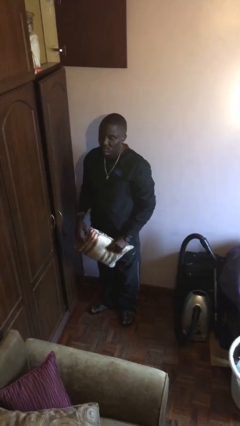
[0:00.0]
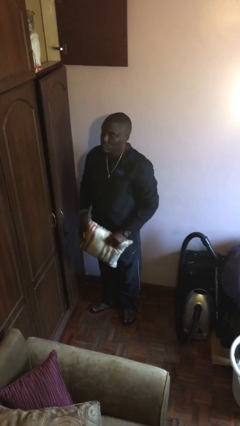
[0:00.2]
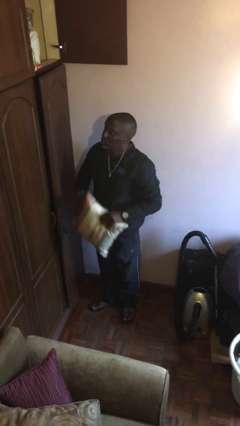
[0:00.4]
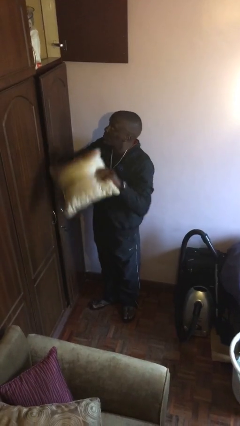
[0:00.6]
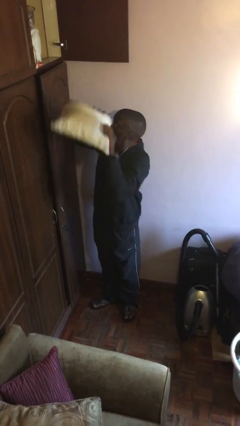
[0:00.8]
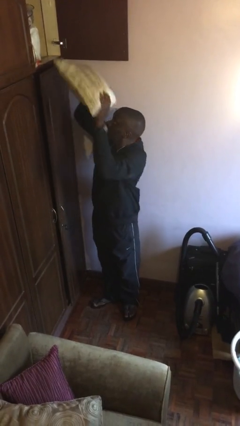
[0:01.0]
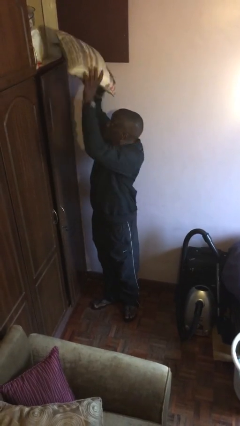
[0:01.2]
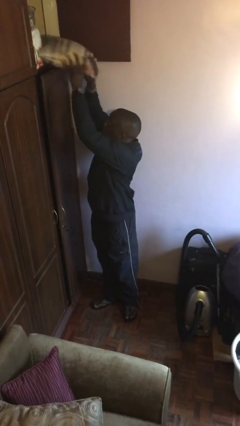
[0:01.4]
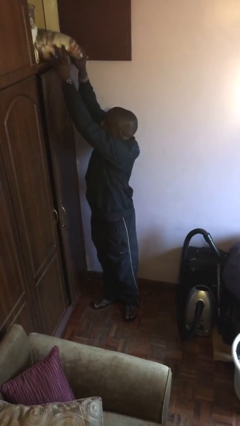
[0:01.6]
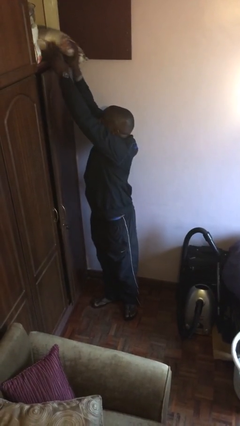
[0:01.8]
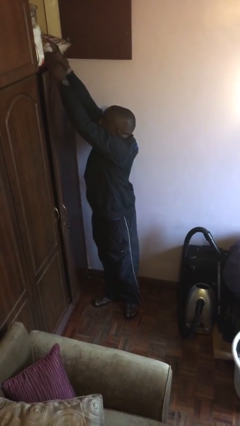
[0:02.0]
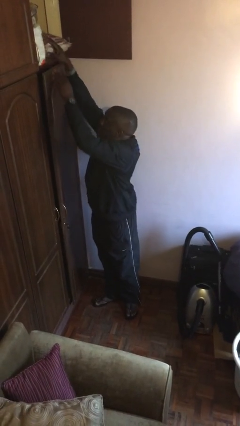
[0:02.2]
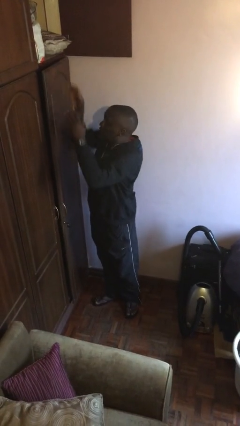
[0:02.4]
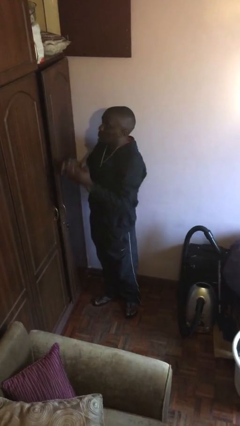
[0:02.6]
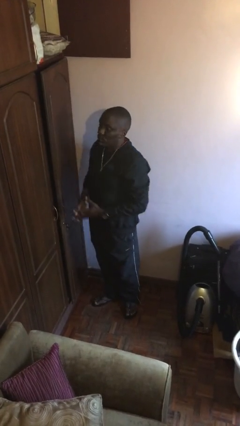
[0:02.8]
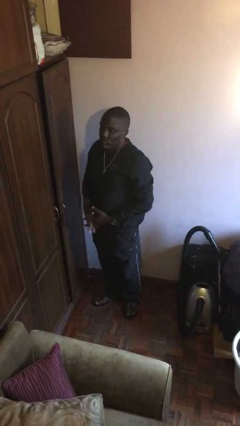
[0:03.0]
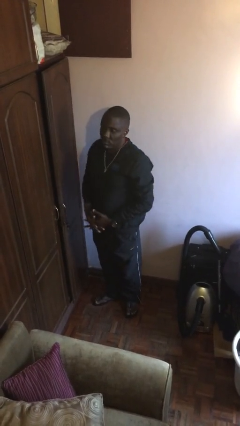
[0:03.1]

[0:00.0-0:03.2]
person puts down object on shelf

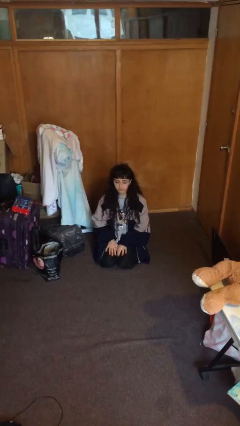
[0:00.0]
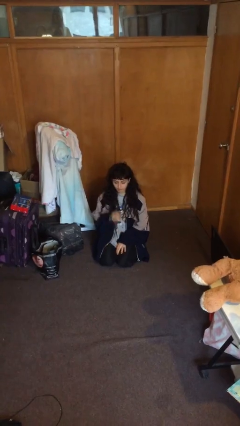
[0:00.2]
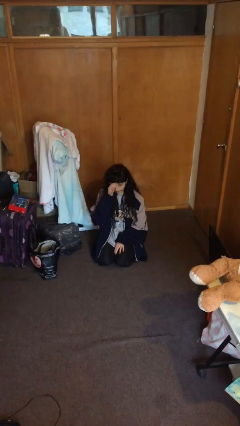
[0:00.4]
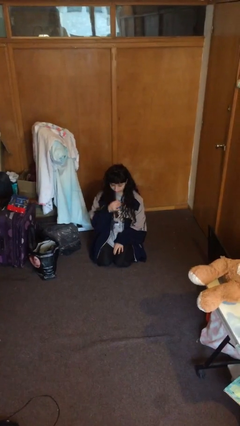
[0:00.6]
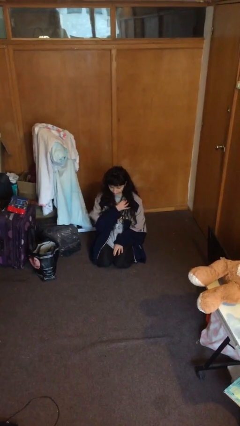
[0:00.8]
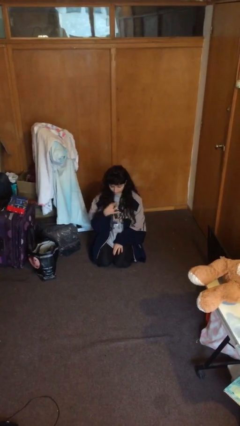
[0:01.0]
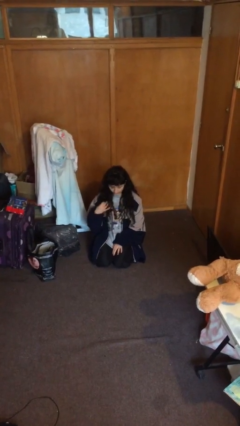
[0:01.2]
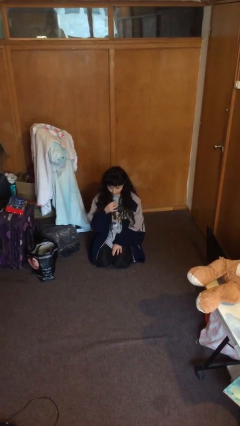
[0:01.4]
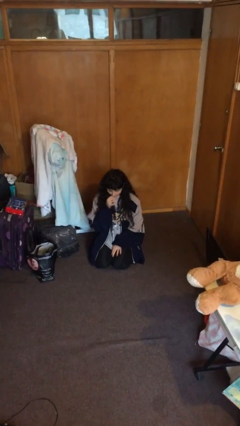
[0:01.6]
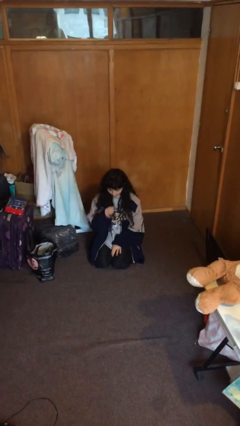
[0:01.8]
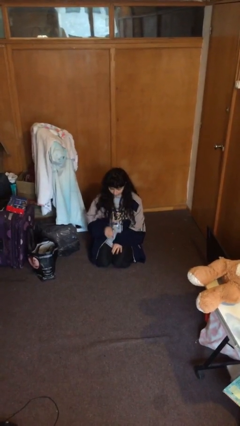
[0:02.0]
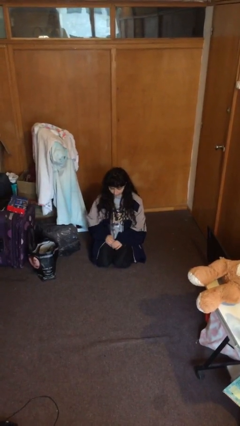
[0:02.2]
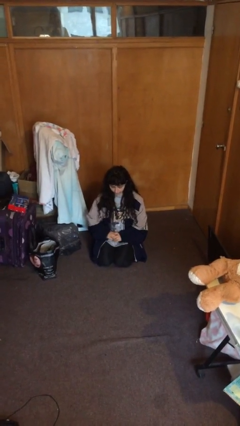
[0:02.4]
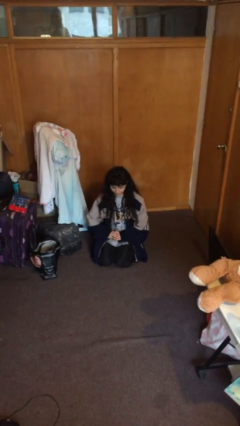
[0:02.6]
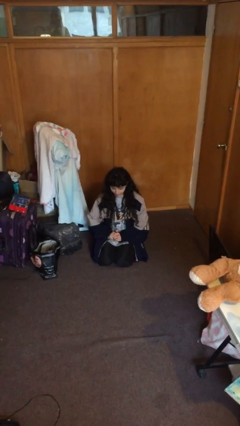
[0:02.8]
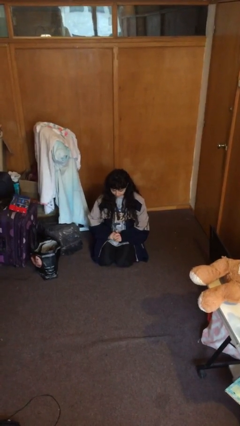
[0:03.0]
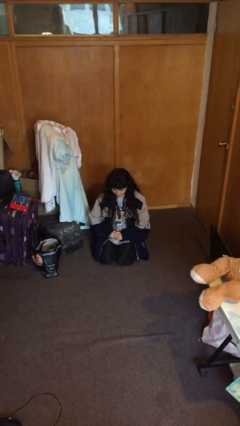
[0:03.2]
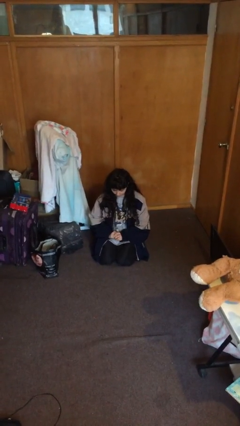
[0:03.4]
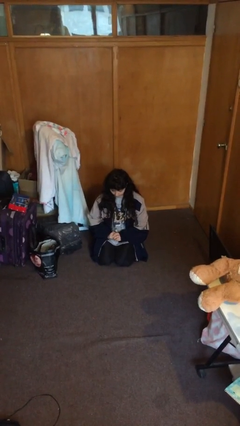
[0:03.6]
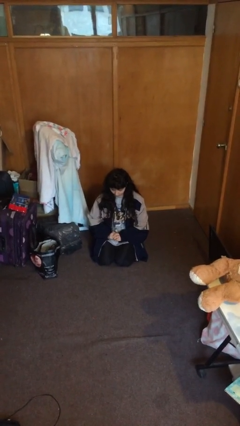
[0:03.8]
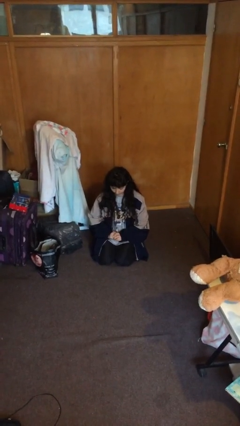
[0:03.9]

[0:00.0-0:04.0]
person prays

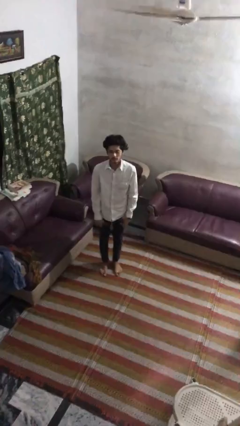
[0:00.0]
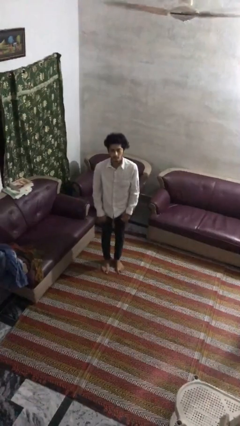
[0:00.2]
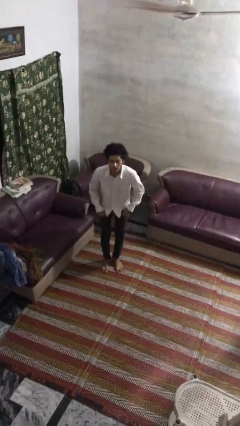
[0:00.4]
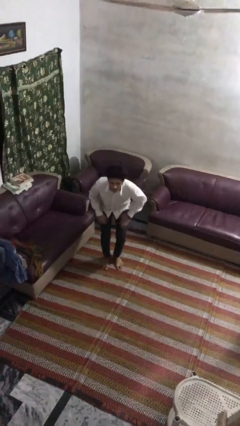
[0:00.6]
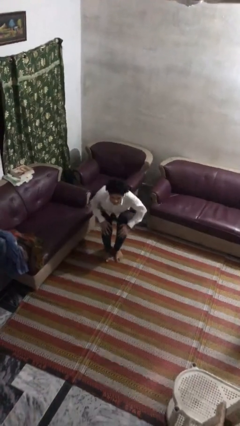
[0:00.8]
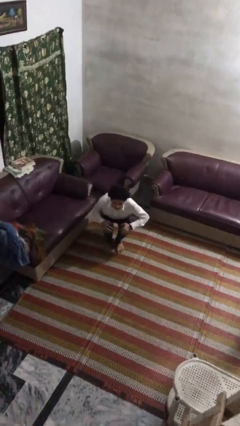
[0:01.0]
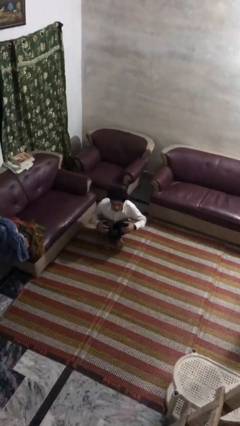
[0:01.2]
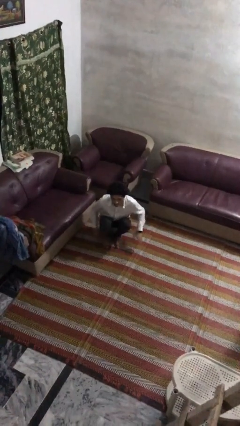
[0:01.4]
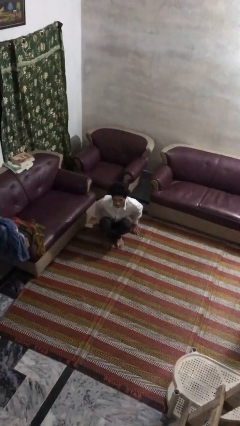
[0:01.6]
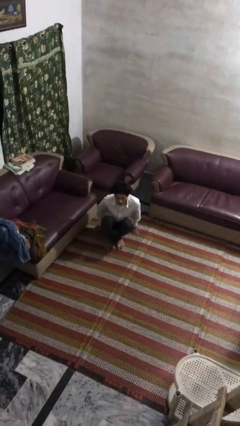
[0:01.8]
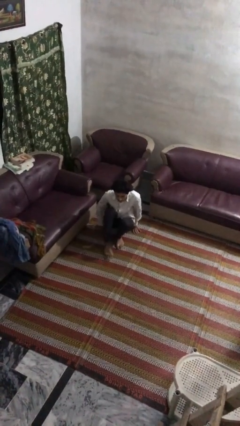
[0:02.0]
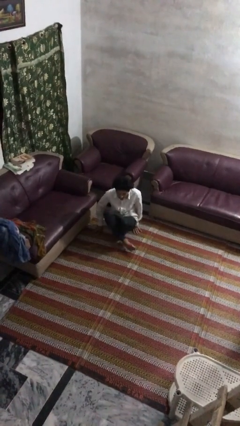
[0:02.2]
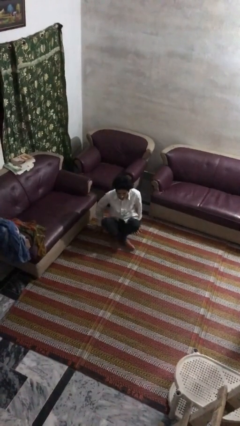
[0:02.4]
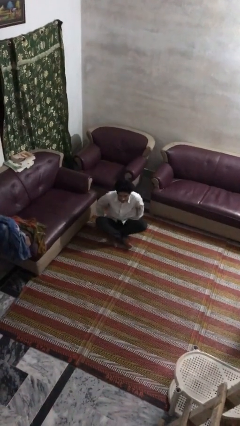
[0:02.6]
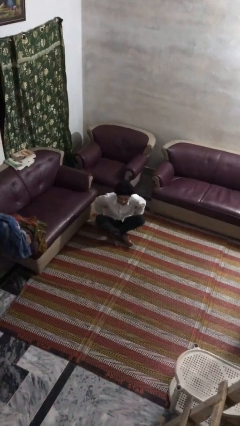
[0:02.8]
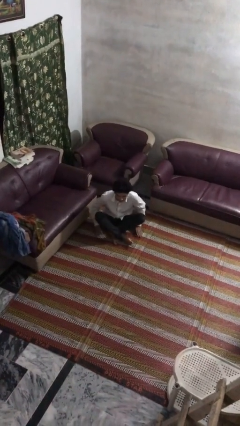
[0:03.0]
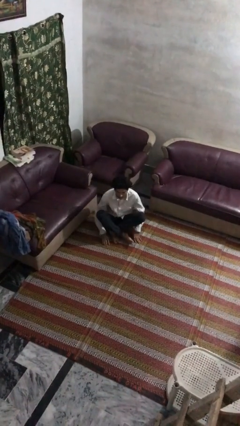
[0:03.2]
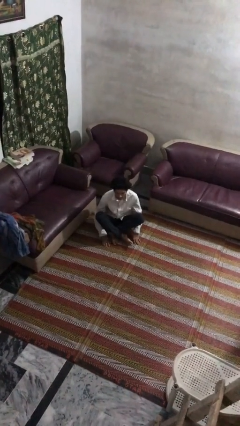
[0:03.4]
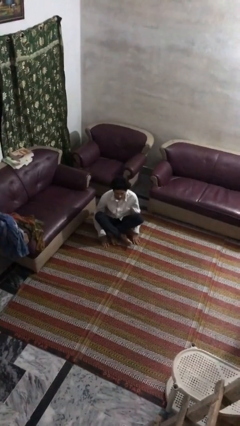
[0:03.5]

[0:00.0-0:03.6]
person sits crisscross

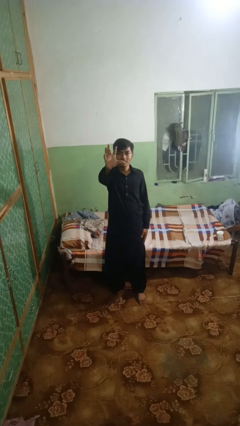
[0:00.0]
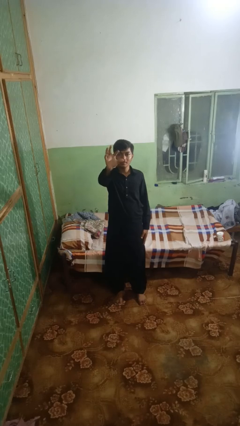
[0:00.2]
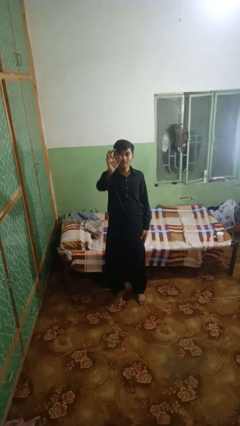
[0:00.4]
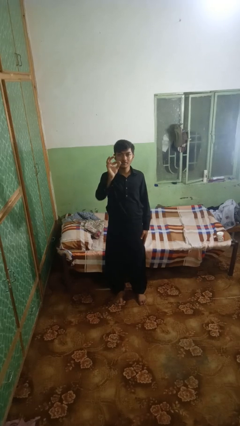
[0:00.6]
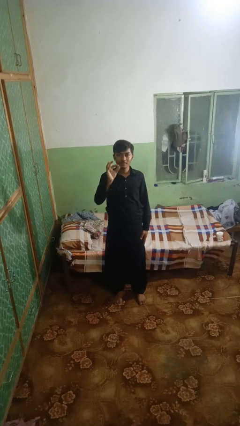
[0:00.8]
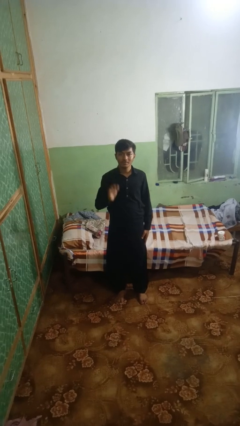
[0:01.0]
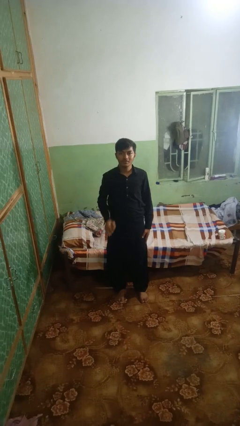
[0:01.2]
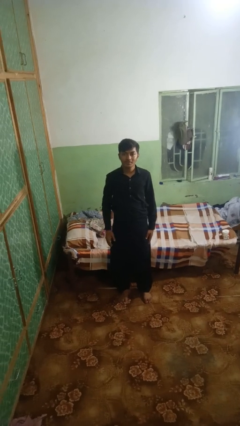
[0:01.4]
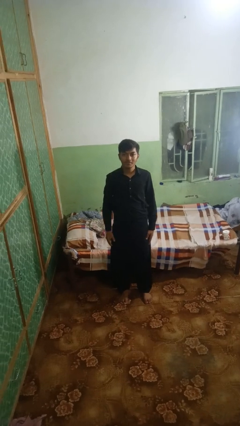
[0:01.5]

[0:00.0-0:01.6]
person gestures zoom out

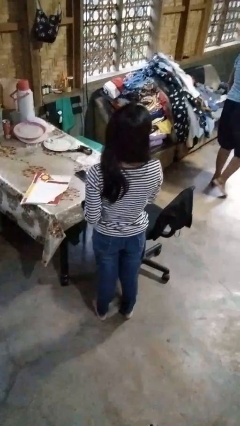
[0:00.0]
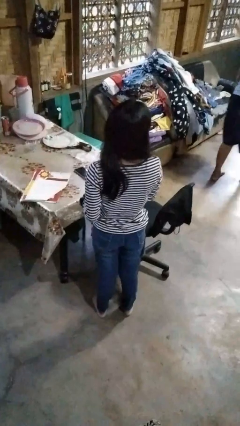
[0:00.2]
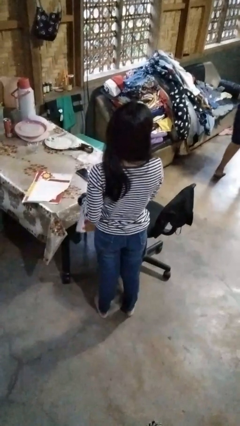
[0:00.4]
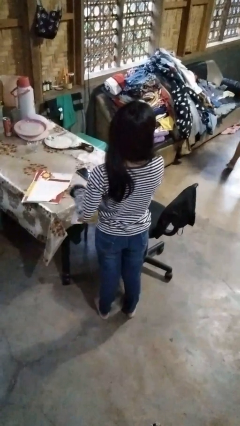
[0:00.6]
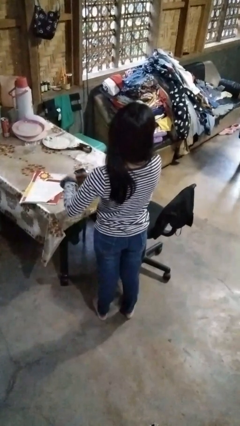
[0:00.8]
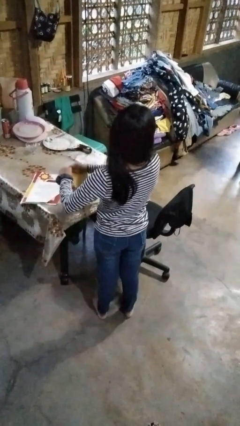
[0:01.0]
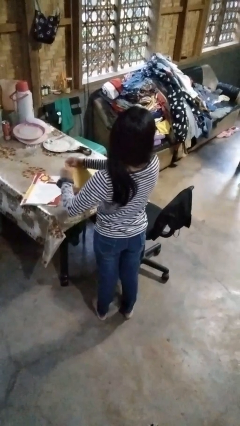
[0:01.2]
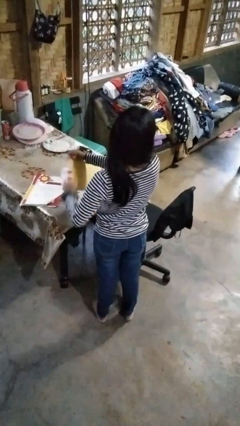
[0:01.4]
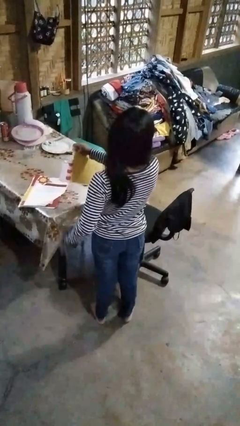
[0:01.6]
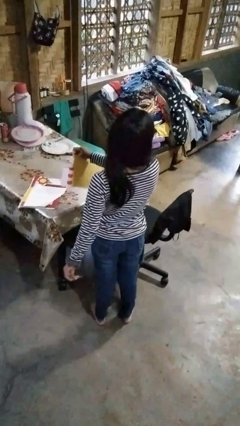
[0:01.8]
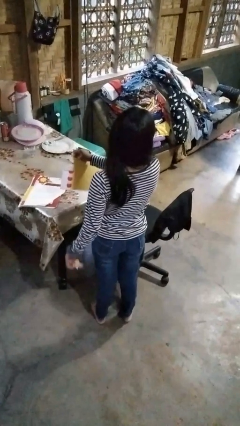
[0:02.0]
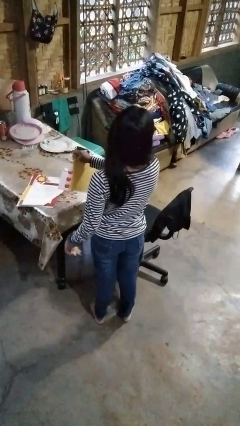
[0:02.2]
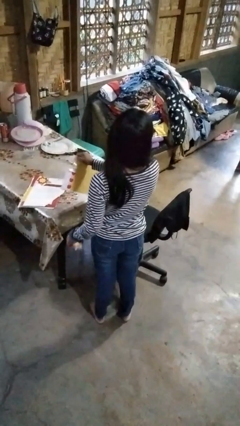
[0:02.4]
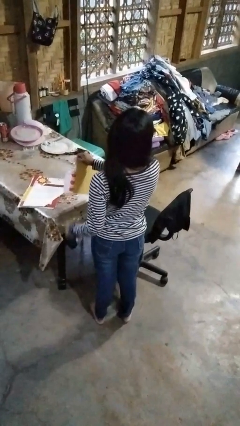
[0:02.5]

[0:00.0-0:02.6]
person tears paper

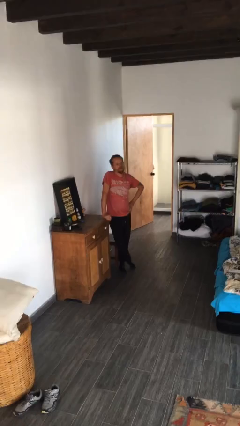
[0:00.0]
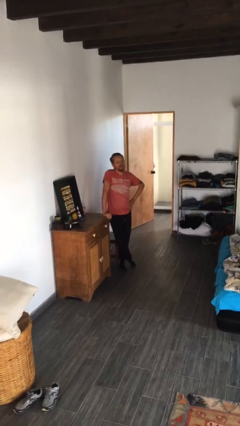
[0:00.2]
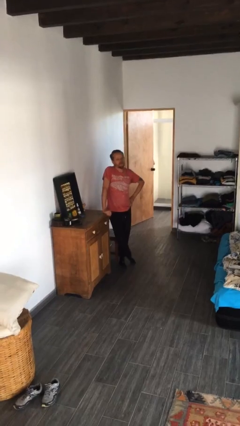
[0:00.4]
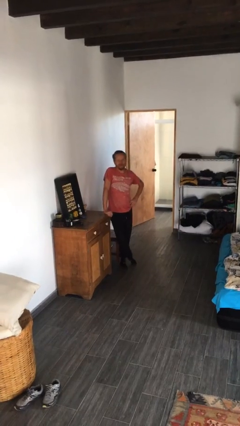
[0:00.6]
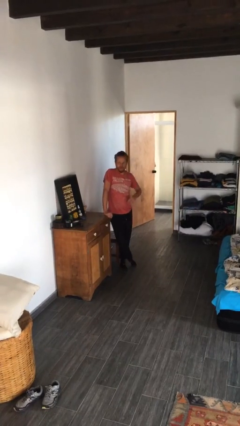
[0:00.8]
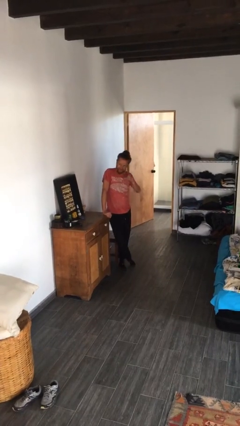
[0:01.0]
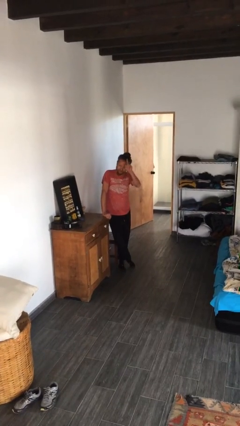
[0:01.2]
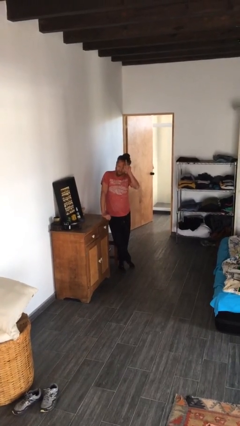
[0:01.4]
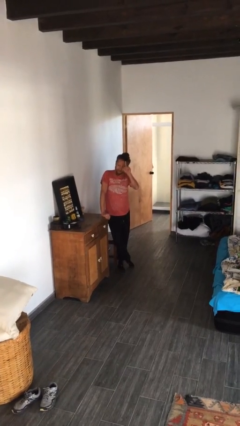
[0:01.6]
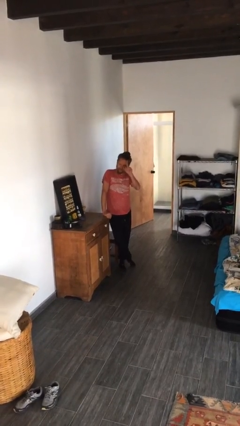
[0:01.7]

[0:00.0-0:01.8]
person gestures raise hand

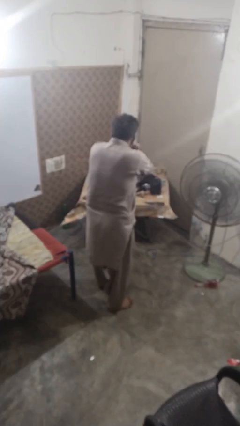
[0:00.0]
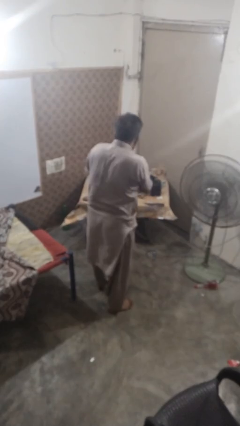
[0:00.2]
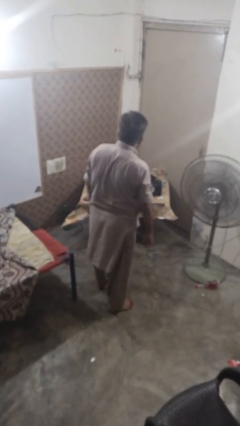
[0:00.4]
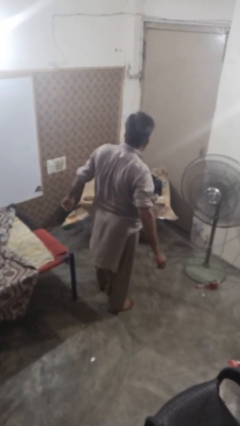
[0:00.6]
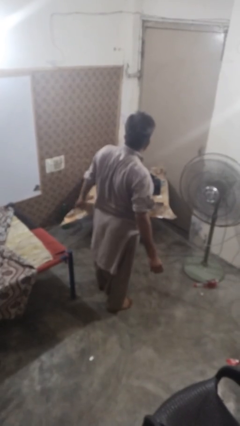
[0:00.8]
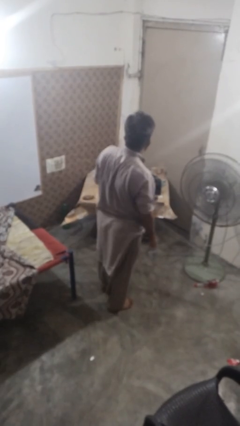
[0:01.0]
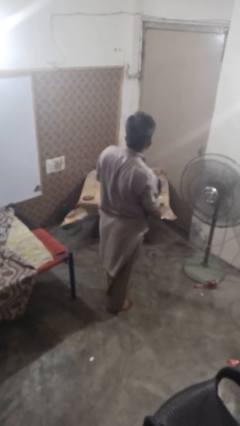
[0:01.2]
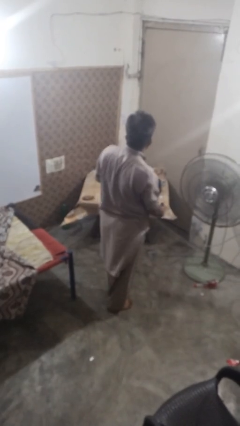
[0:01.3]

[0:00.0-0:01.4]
person karate chop
